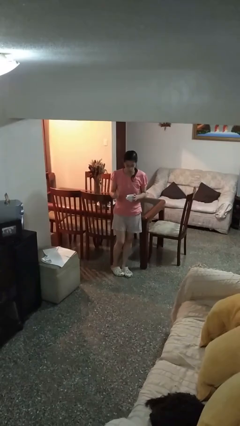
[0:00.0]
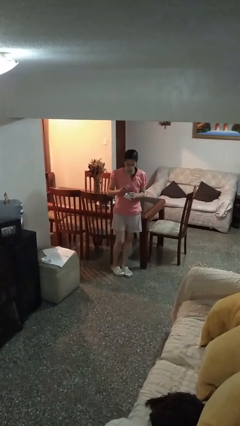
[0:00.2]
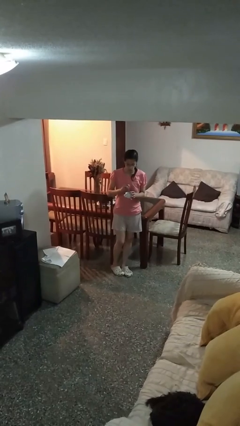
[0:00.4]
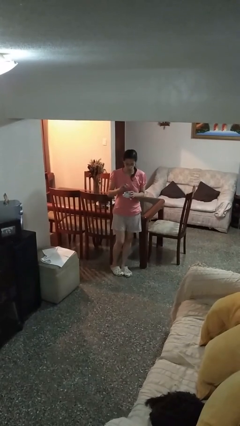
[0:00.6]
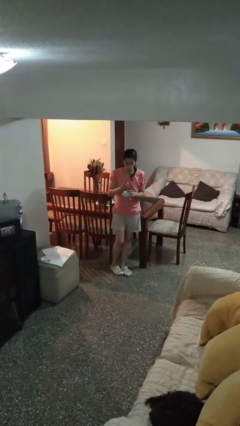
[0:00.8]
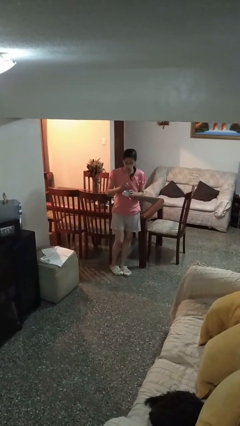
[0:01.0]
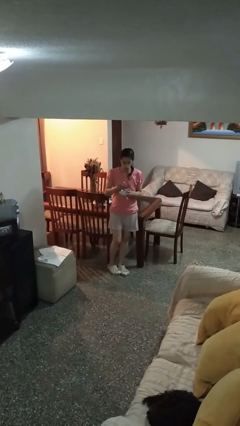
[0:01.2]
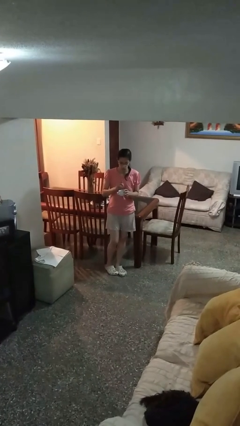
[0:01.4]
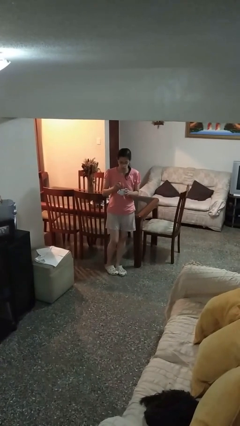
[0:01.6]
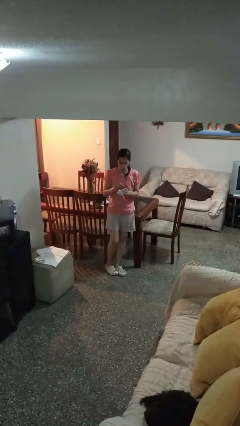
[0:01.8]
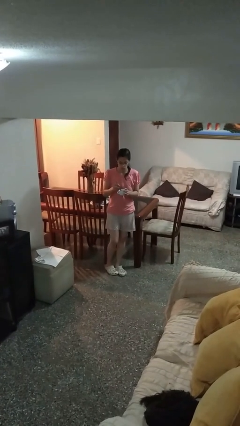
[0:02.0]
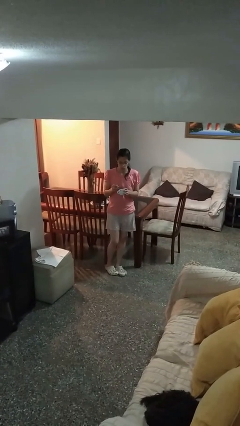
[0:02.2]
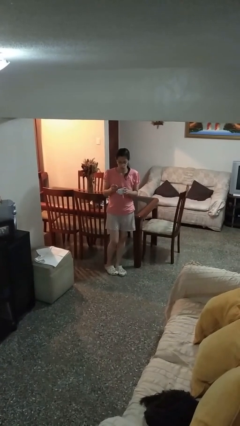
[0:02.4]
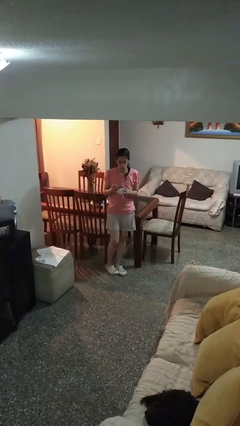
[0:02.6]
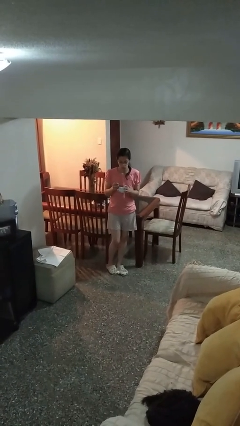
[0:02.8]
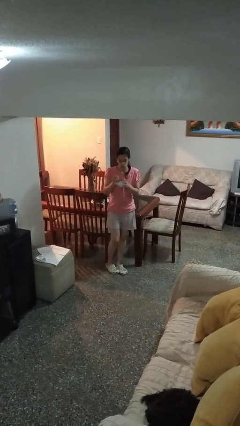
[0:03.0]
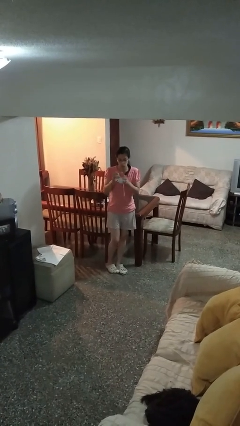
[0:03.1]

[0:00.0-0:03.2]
person stirs mug

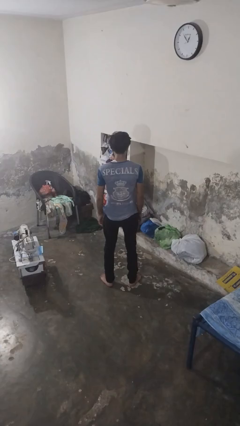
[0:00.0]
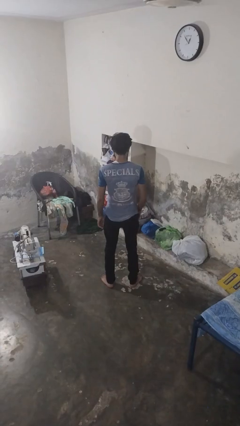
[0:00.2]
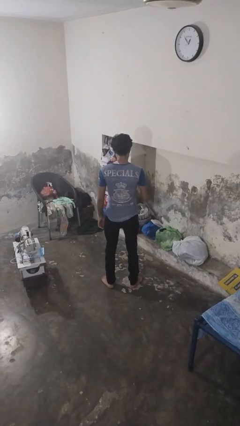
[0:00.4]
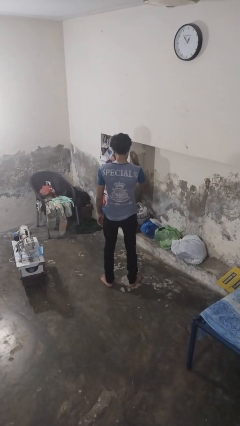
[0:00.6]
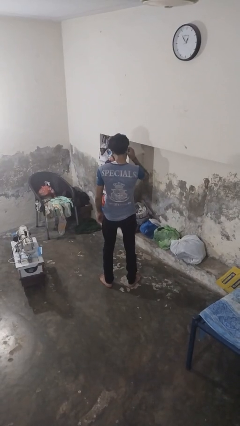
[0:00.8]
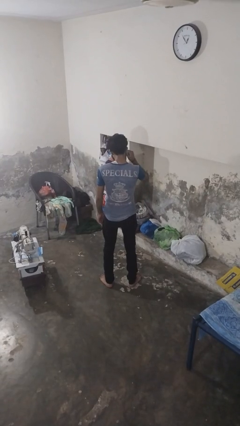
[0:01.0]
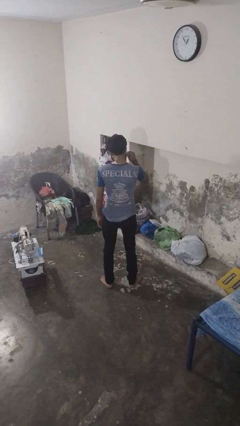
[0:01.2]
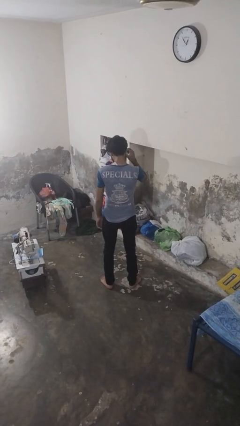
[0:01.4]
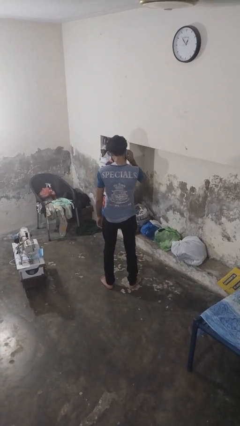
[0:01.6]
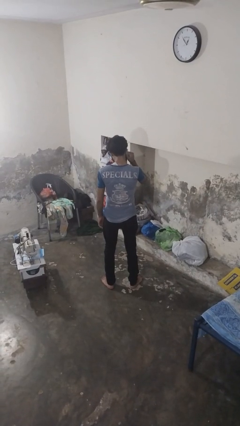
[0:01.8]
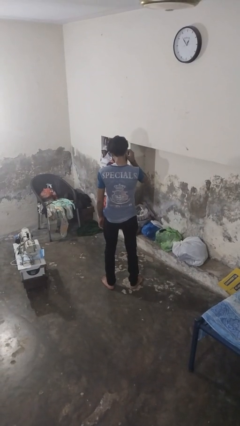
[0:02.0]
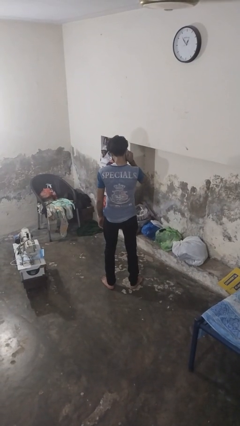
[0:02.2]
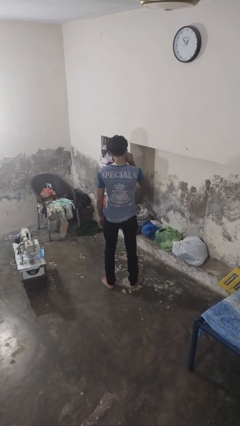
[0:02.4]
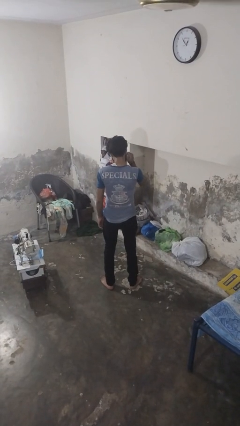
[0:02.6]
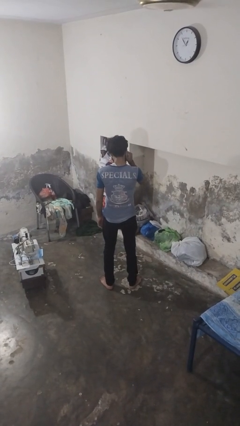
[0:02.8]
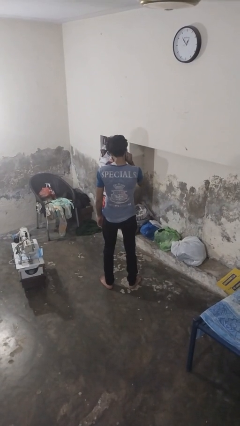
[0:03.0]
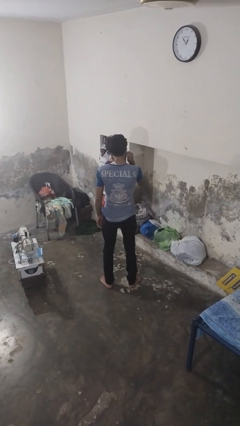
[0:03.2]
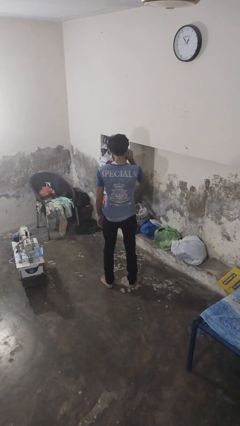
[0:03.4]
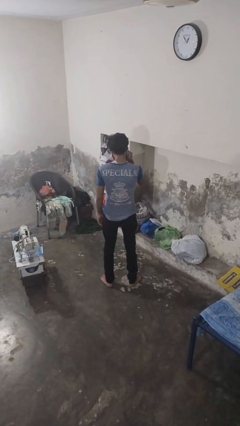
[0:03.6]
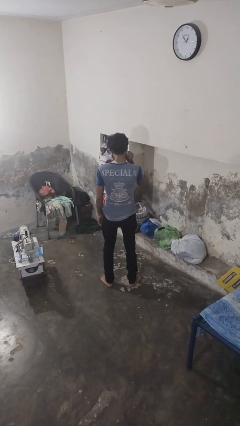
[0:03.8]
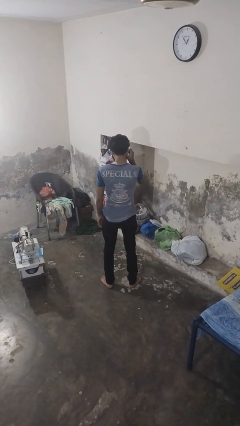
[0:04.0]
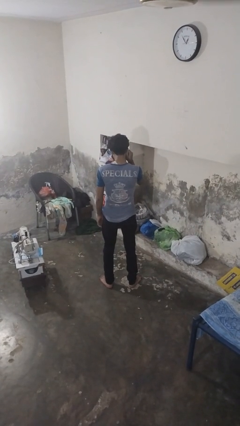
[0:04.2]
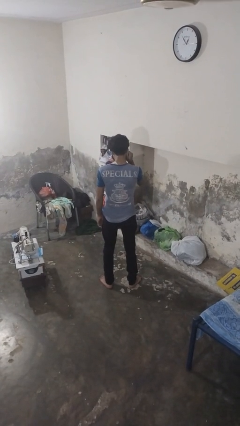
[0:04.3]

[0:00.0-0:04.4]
person touches earlobe

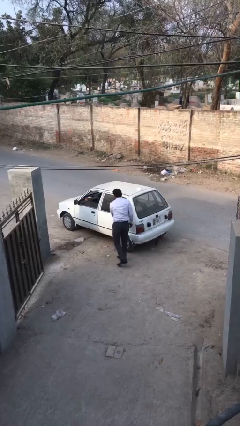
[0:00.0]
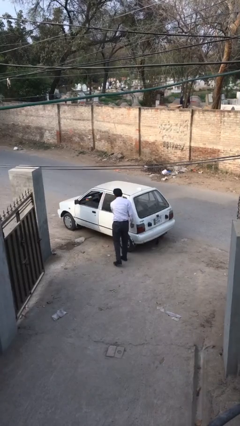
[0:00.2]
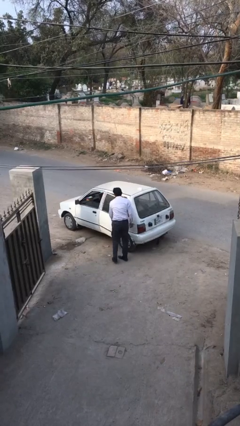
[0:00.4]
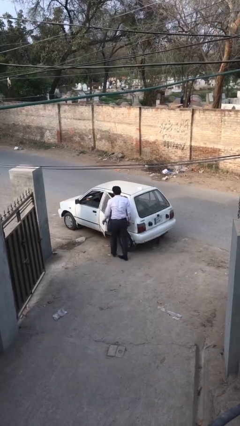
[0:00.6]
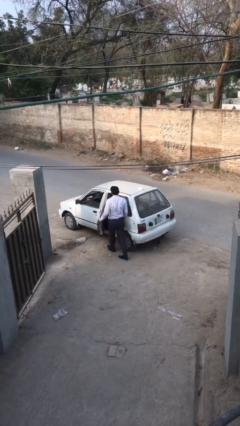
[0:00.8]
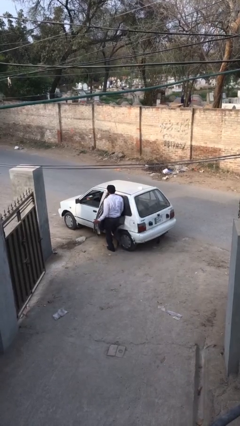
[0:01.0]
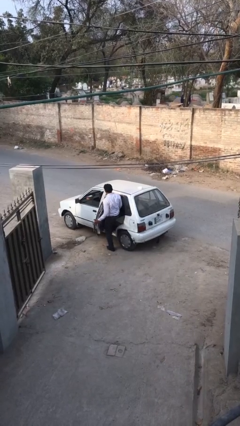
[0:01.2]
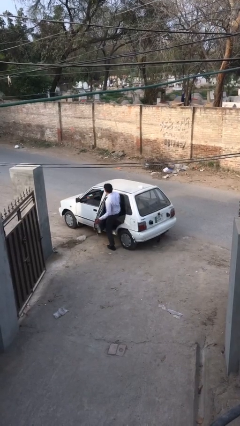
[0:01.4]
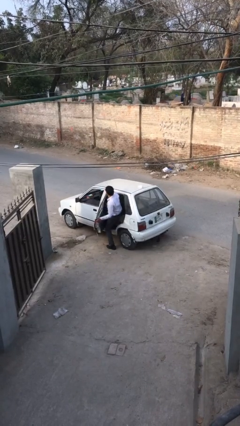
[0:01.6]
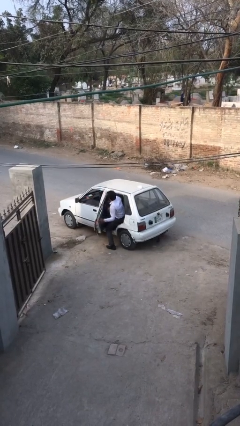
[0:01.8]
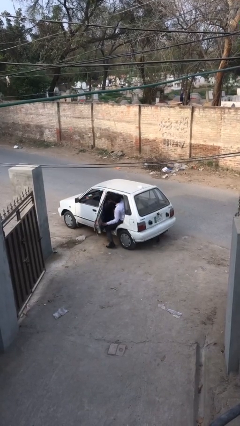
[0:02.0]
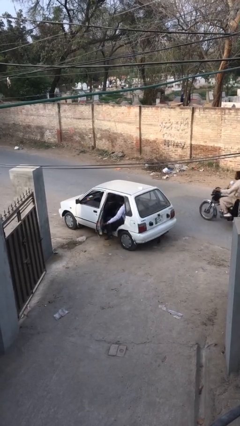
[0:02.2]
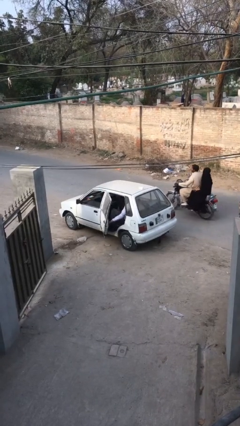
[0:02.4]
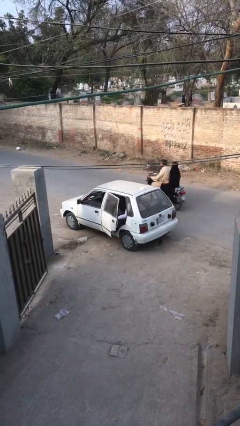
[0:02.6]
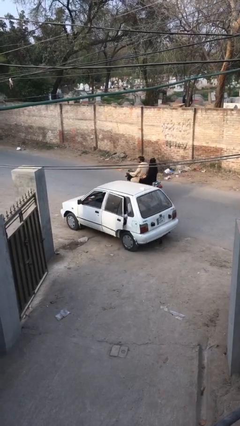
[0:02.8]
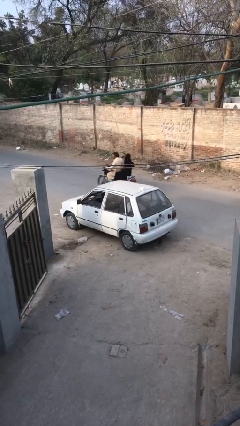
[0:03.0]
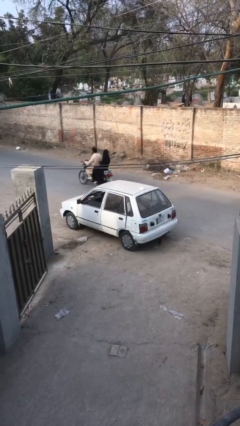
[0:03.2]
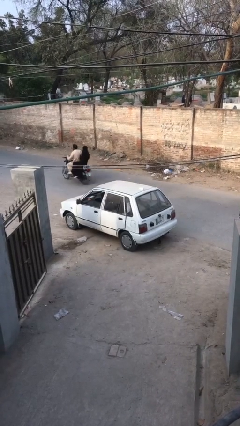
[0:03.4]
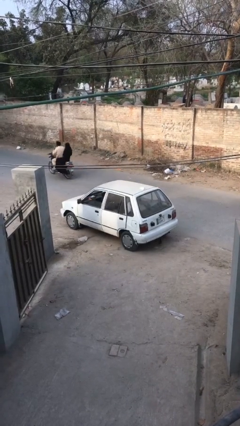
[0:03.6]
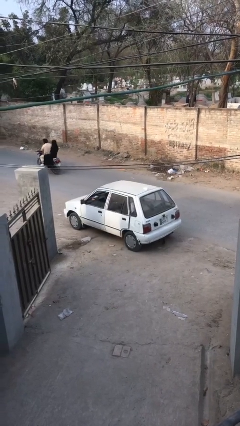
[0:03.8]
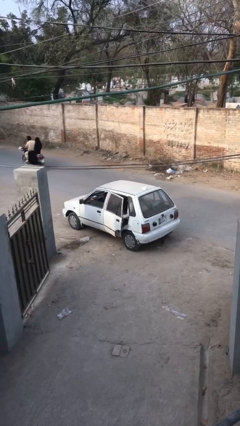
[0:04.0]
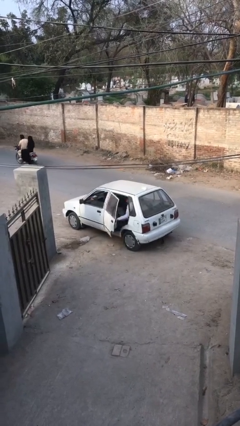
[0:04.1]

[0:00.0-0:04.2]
car picks up person

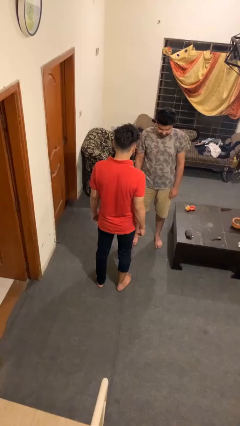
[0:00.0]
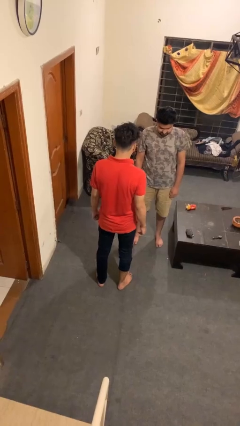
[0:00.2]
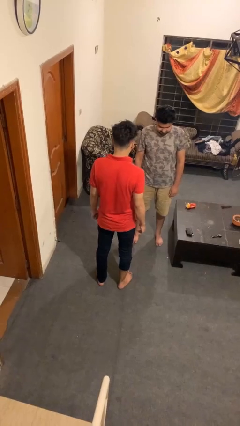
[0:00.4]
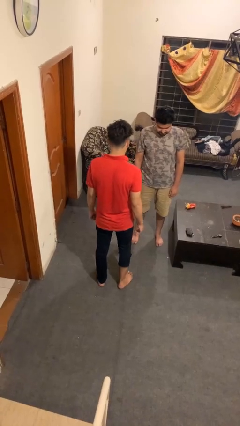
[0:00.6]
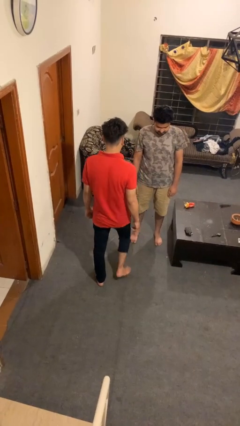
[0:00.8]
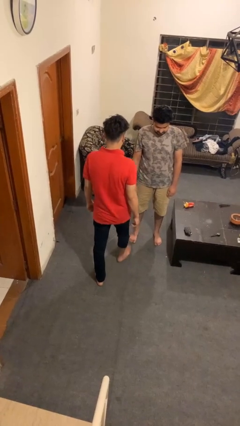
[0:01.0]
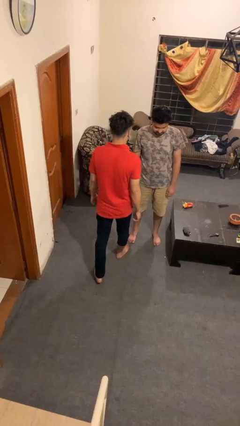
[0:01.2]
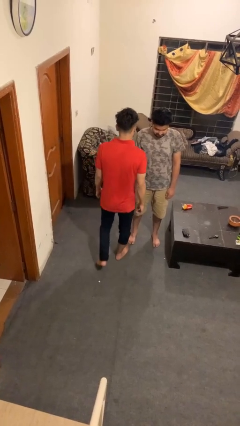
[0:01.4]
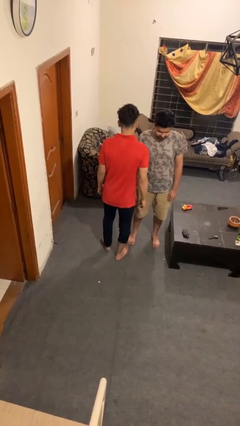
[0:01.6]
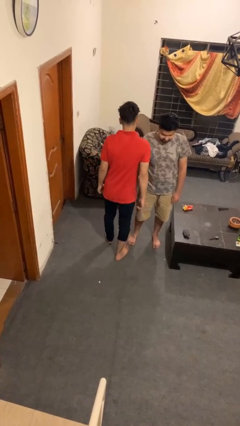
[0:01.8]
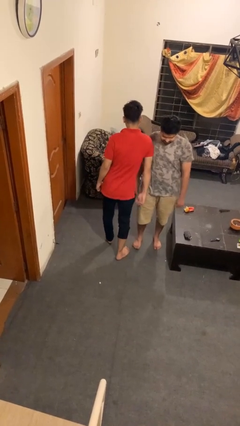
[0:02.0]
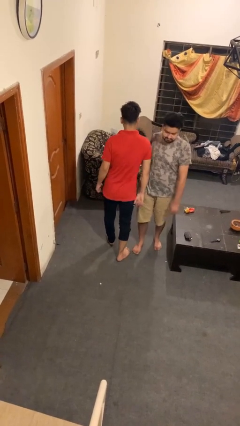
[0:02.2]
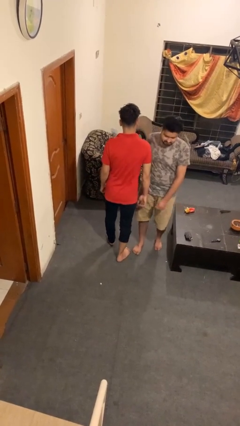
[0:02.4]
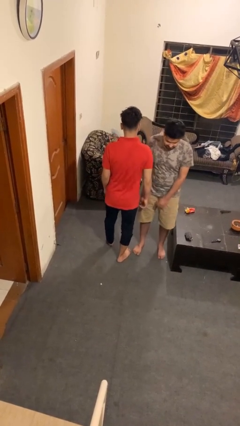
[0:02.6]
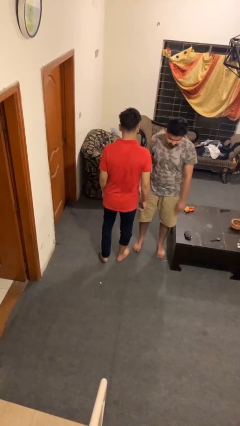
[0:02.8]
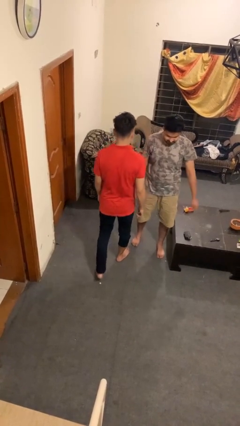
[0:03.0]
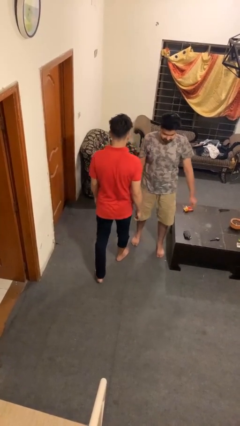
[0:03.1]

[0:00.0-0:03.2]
person bumps into person

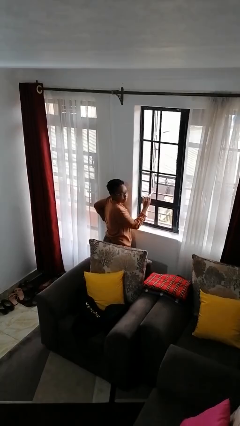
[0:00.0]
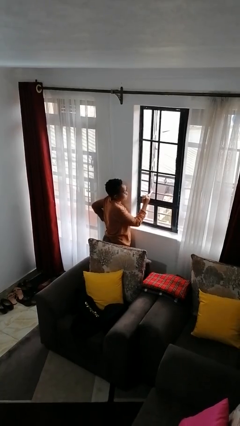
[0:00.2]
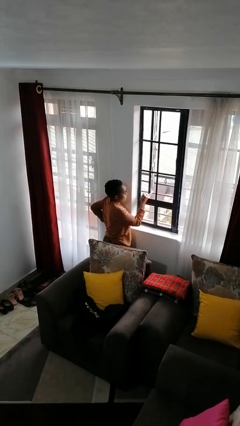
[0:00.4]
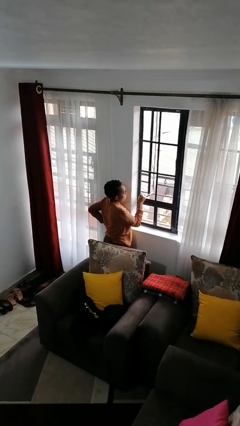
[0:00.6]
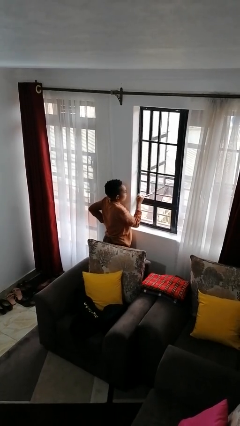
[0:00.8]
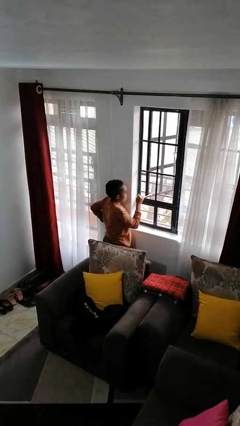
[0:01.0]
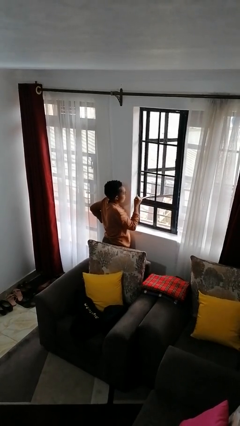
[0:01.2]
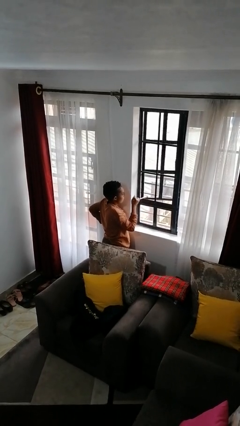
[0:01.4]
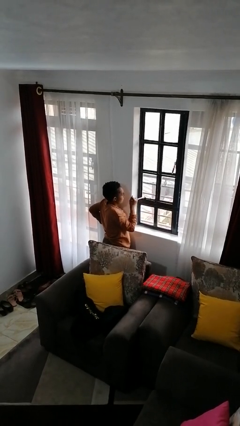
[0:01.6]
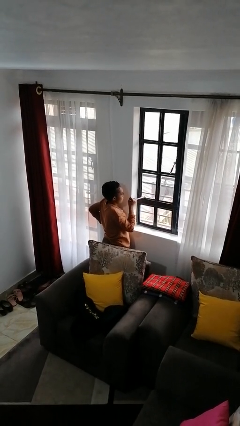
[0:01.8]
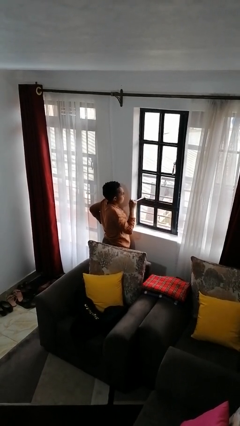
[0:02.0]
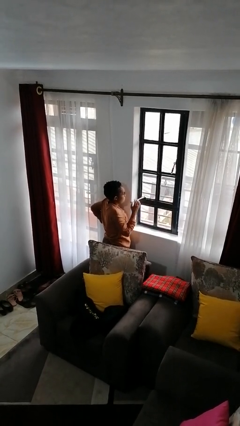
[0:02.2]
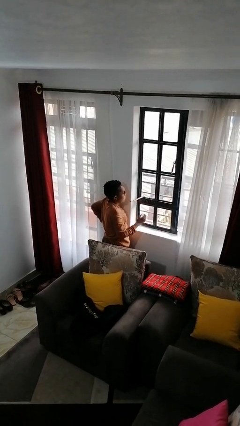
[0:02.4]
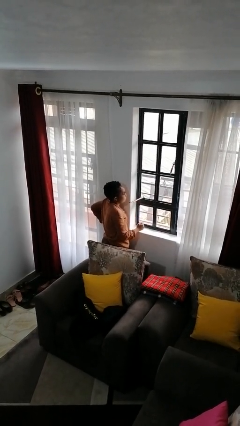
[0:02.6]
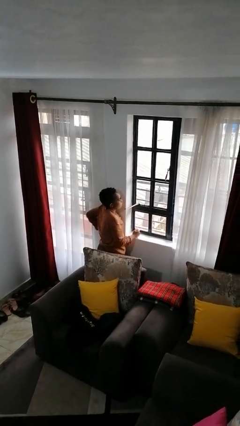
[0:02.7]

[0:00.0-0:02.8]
person closes home window
